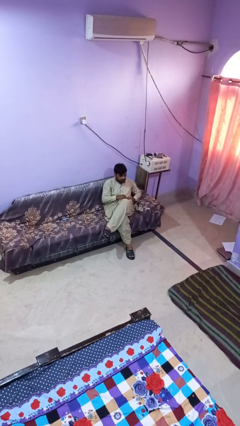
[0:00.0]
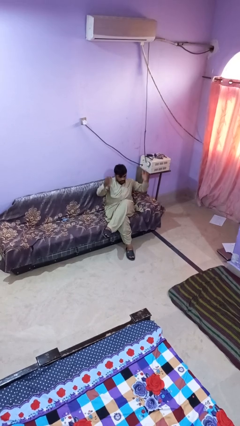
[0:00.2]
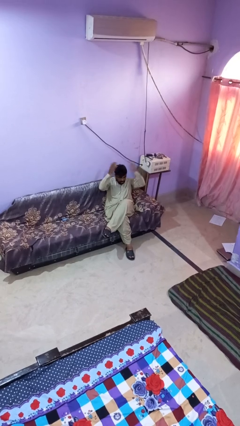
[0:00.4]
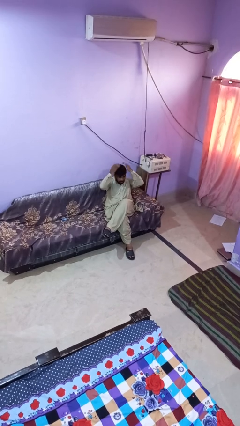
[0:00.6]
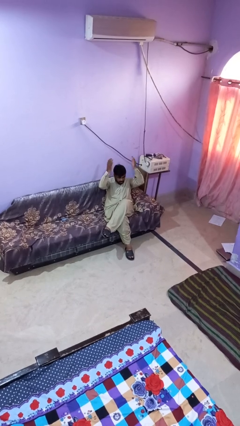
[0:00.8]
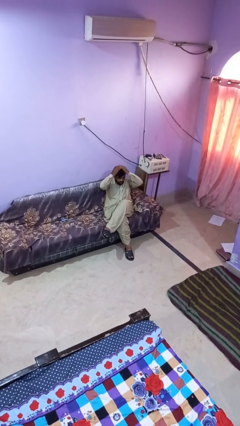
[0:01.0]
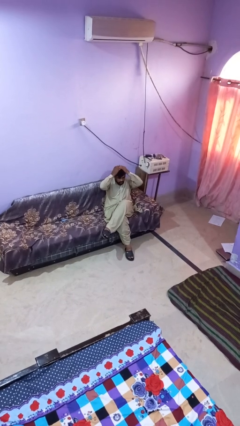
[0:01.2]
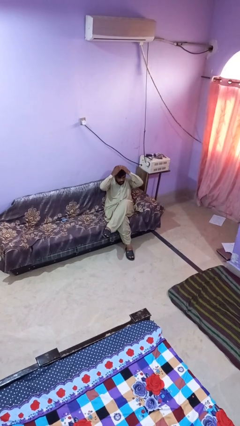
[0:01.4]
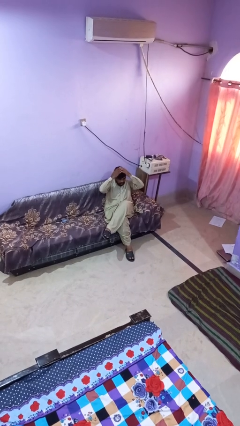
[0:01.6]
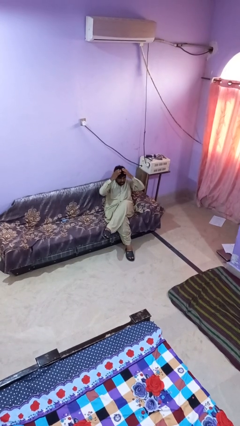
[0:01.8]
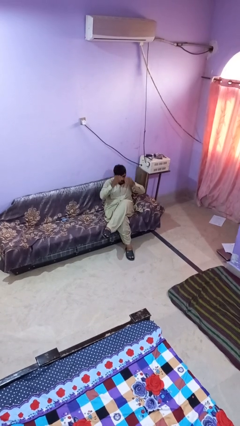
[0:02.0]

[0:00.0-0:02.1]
person pats head

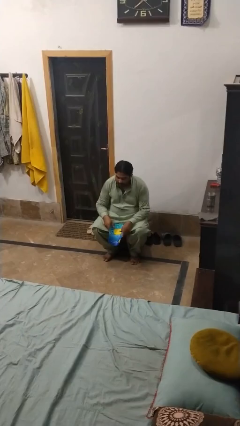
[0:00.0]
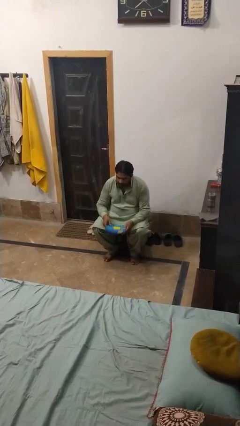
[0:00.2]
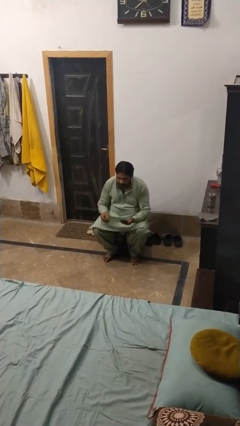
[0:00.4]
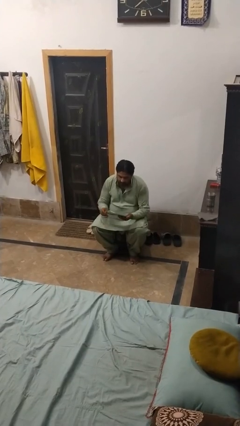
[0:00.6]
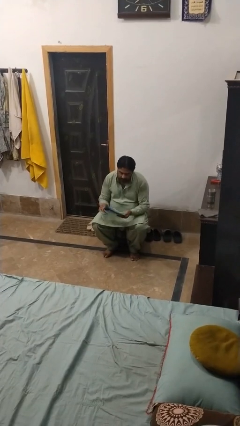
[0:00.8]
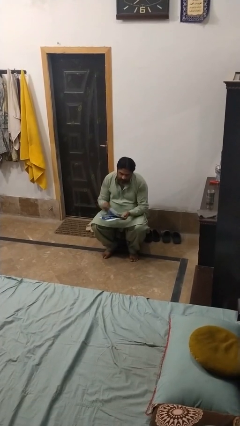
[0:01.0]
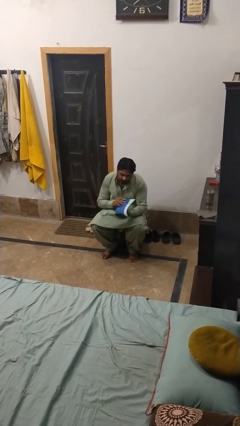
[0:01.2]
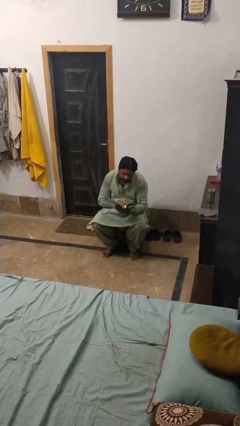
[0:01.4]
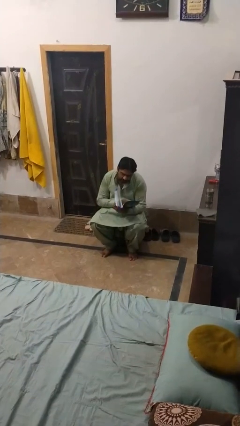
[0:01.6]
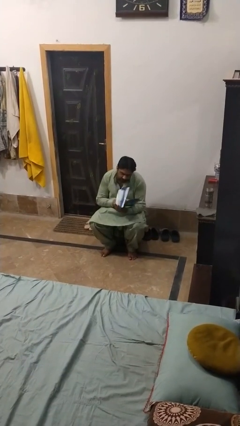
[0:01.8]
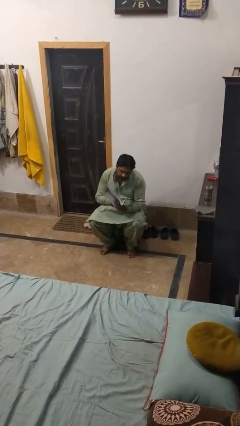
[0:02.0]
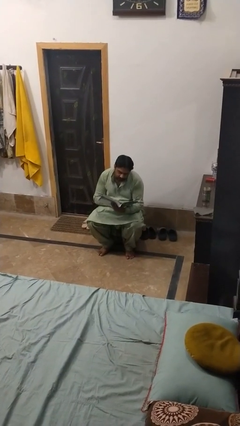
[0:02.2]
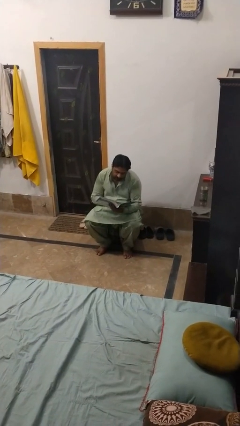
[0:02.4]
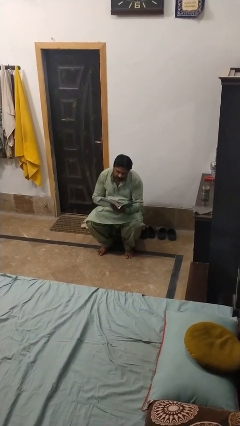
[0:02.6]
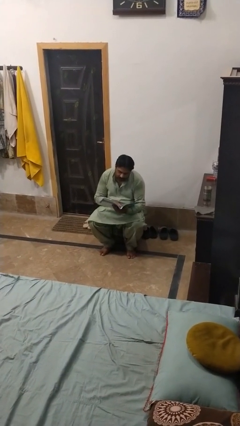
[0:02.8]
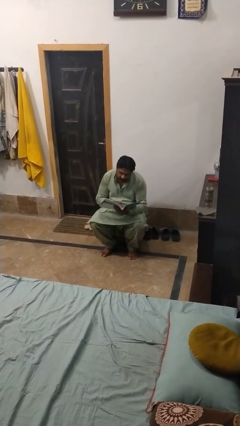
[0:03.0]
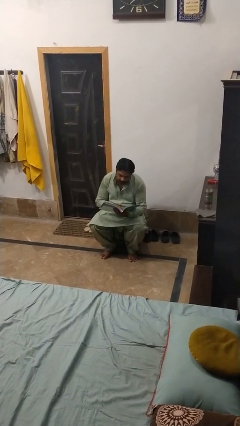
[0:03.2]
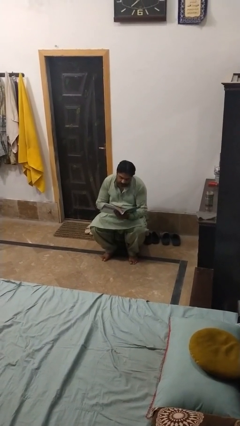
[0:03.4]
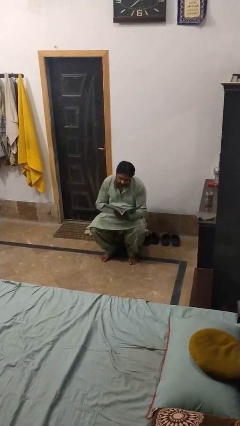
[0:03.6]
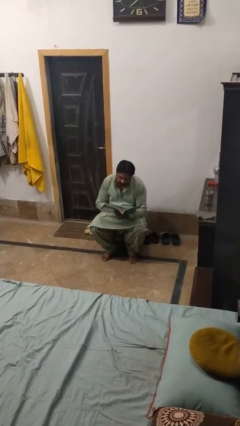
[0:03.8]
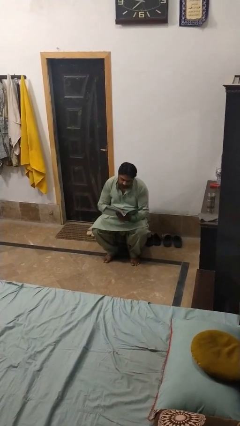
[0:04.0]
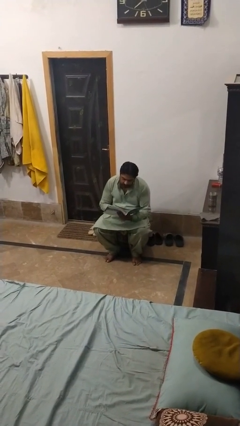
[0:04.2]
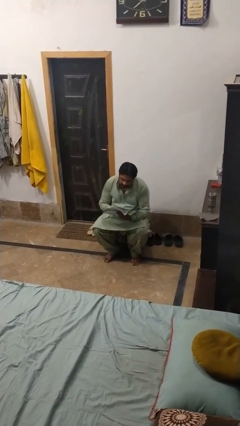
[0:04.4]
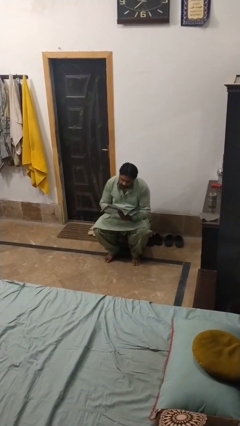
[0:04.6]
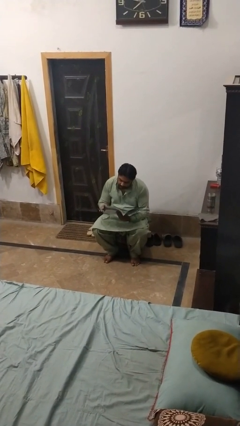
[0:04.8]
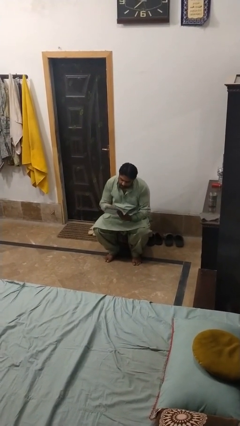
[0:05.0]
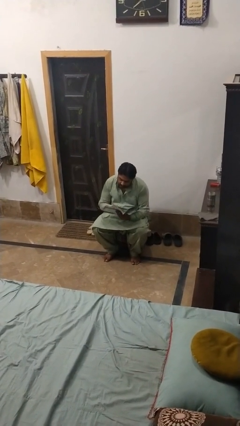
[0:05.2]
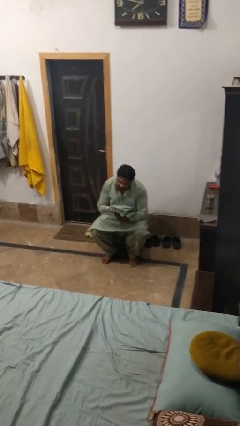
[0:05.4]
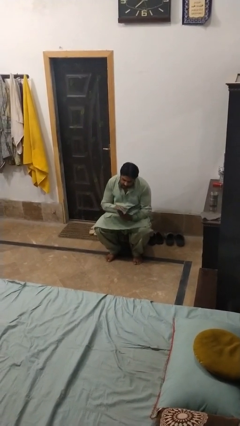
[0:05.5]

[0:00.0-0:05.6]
person reads magazine

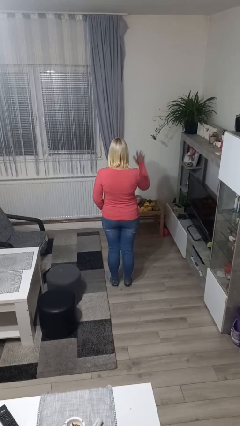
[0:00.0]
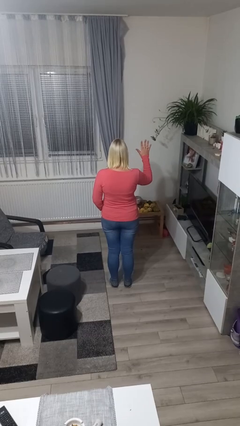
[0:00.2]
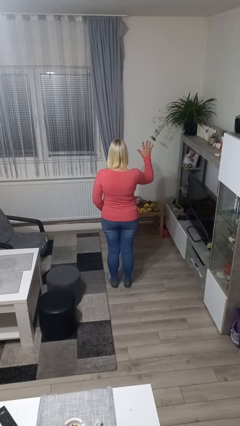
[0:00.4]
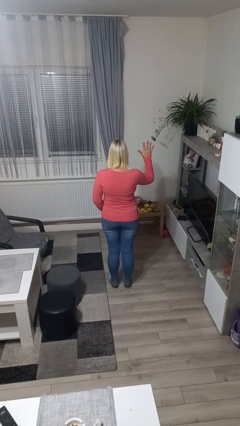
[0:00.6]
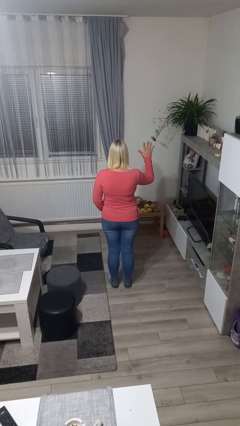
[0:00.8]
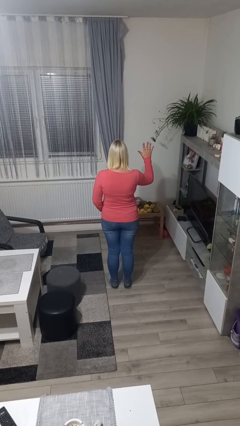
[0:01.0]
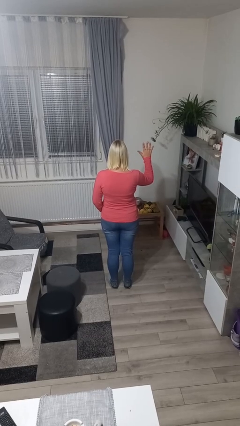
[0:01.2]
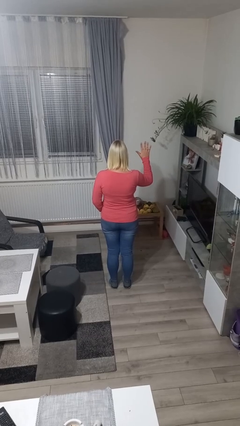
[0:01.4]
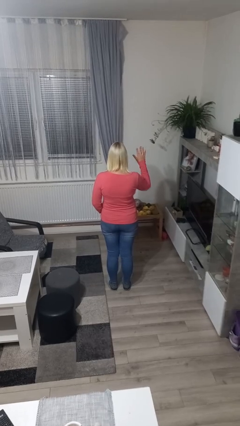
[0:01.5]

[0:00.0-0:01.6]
person gestures number five

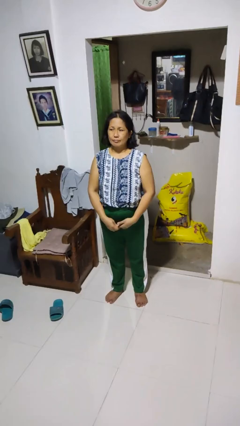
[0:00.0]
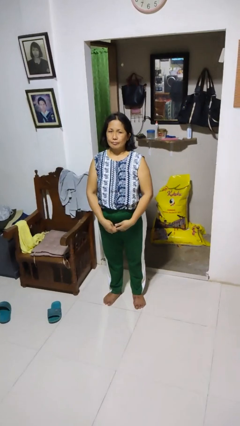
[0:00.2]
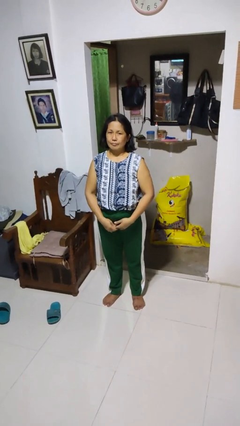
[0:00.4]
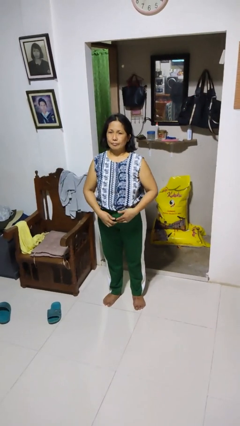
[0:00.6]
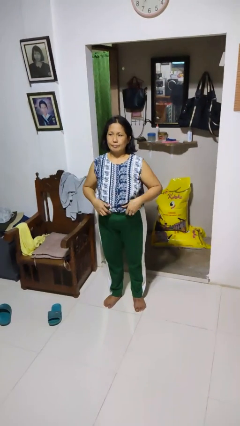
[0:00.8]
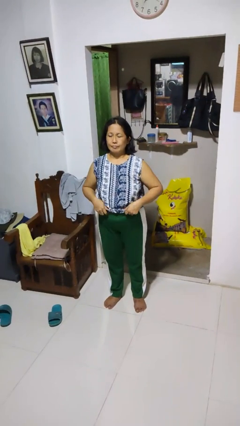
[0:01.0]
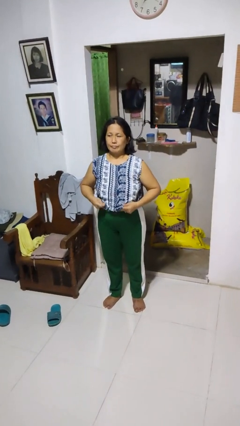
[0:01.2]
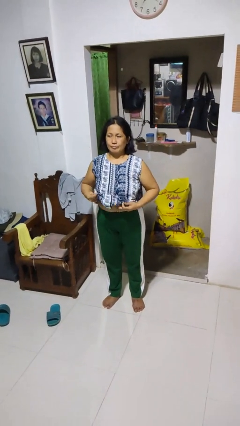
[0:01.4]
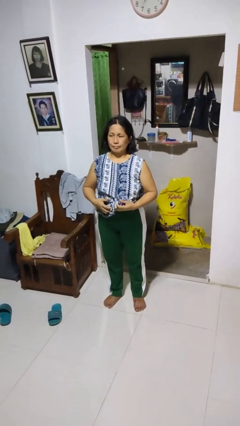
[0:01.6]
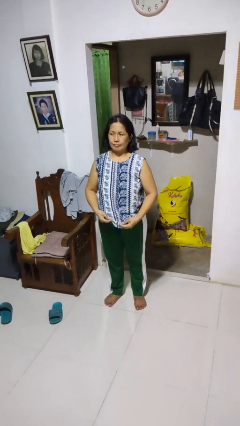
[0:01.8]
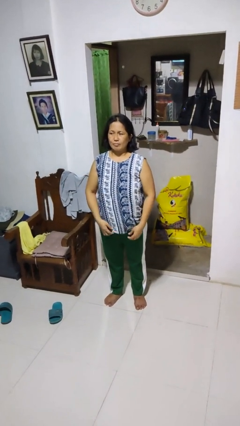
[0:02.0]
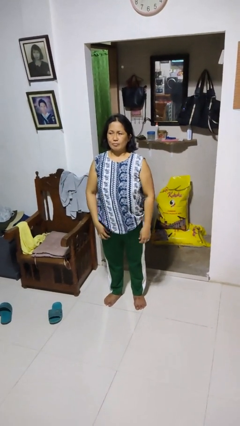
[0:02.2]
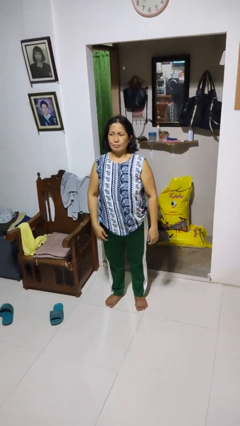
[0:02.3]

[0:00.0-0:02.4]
person untucks shirt

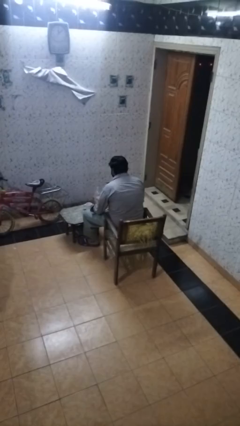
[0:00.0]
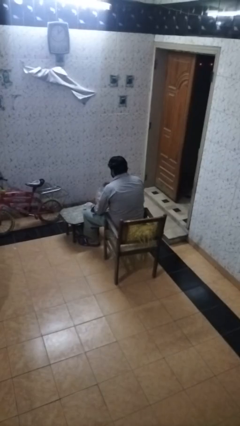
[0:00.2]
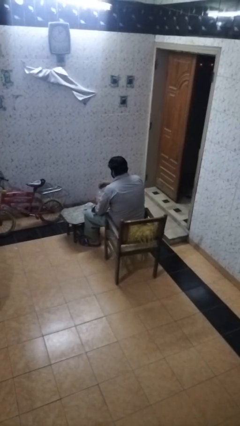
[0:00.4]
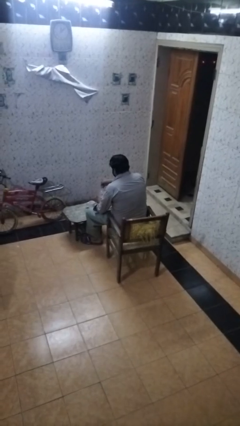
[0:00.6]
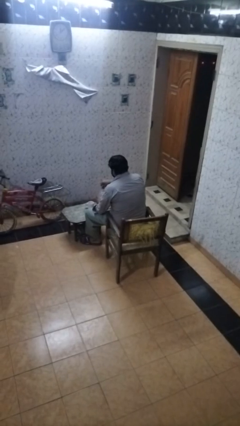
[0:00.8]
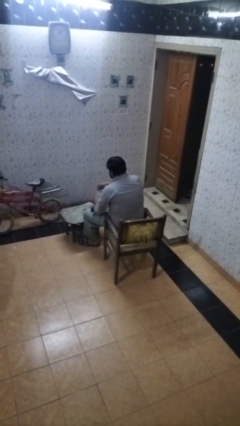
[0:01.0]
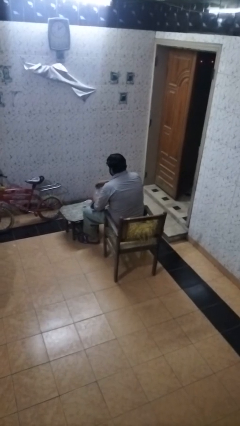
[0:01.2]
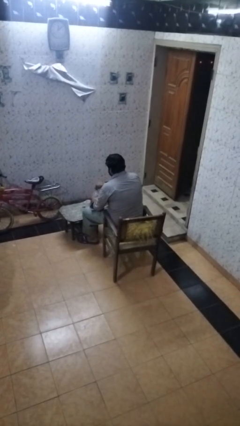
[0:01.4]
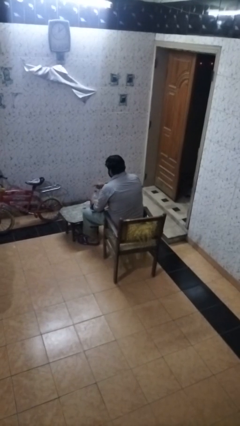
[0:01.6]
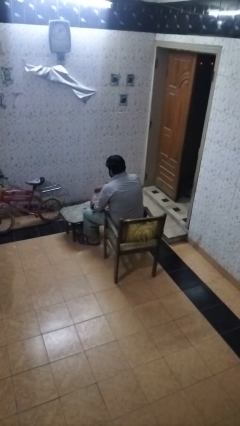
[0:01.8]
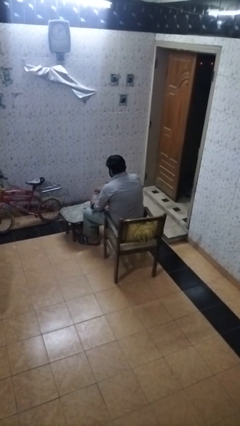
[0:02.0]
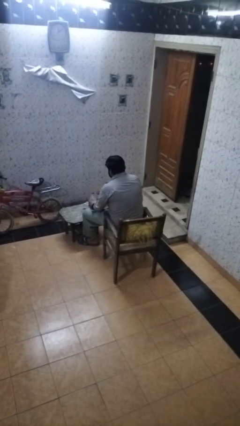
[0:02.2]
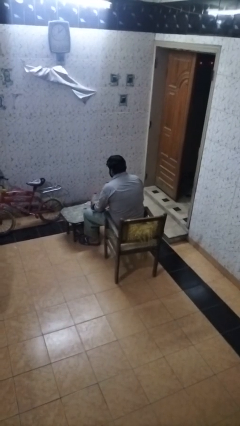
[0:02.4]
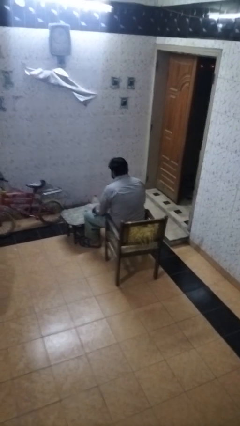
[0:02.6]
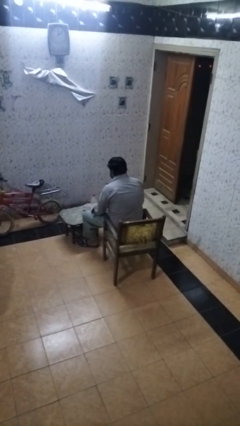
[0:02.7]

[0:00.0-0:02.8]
person screws lid to bottle

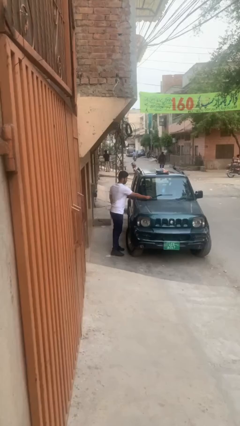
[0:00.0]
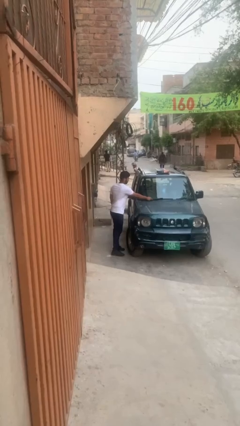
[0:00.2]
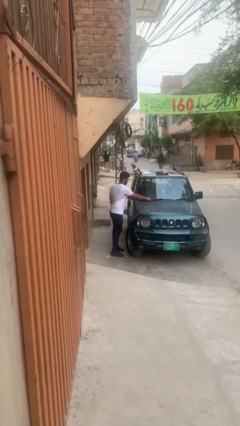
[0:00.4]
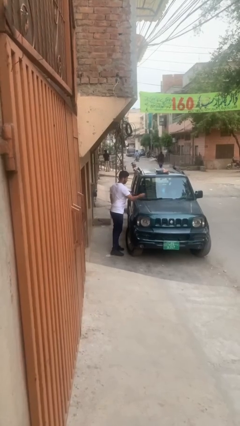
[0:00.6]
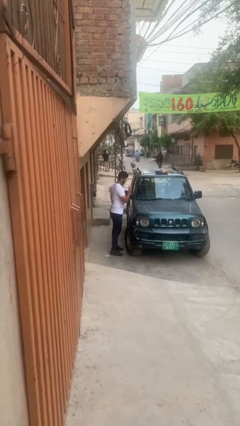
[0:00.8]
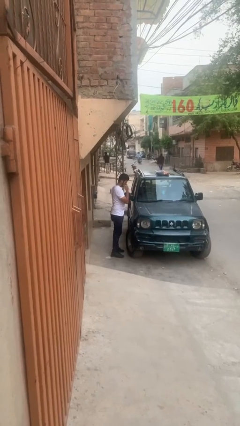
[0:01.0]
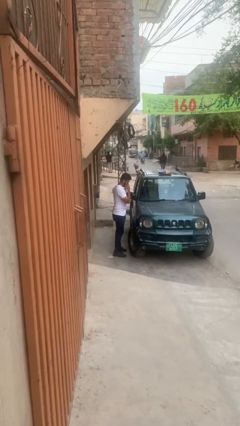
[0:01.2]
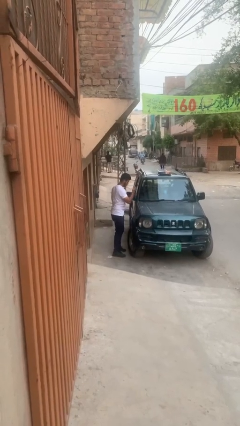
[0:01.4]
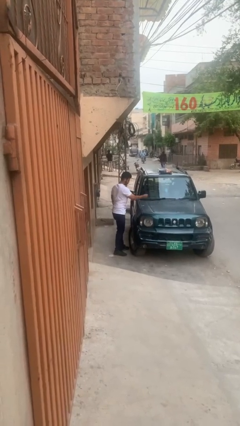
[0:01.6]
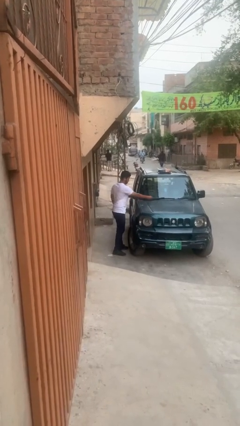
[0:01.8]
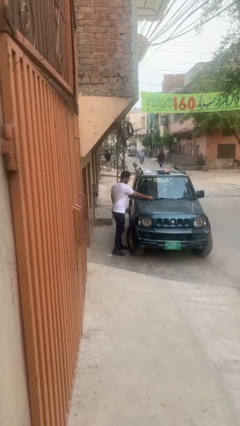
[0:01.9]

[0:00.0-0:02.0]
person flips down car wipers

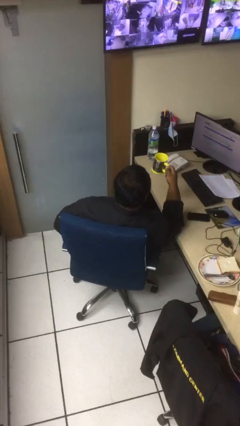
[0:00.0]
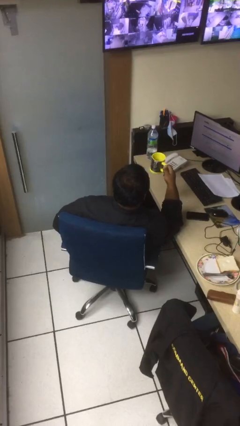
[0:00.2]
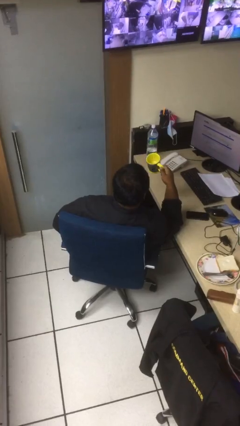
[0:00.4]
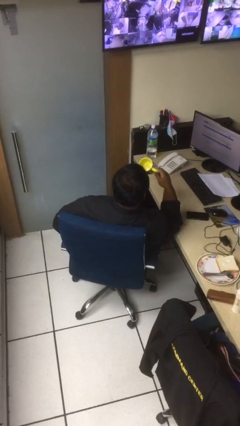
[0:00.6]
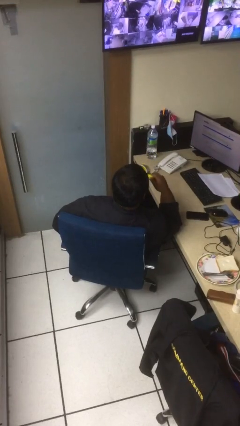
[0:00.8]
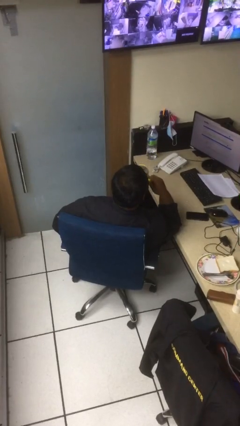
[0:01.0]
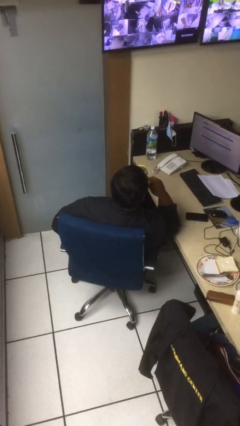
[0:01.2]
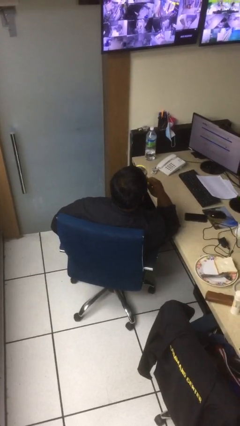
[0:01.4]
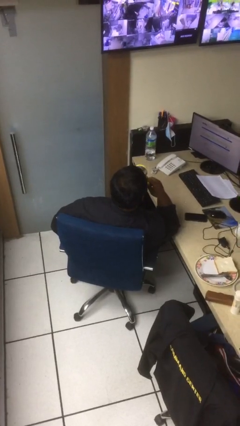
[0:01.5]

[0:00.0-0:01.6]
person drinks from mug
